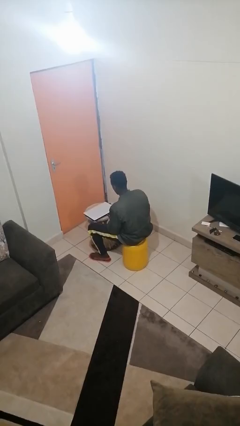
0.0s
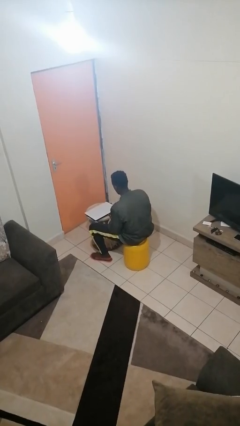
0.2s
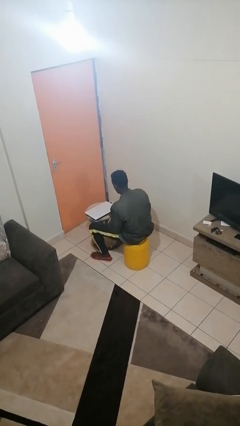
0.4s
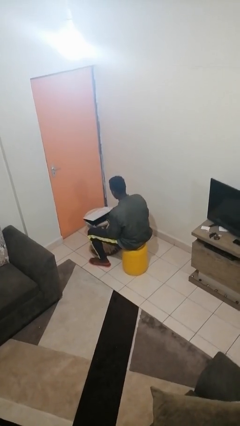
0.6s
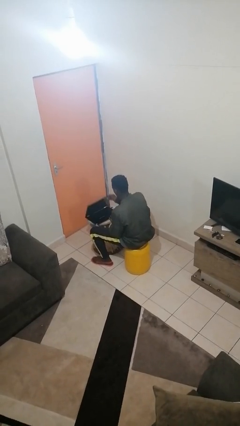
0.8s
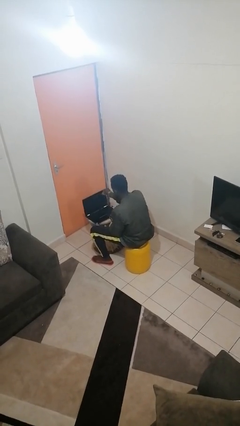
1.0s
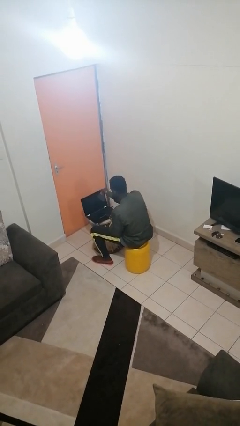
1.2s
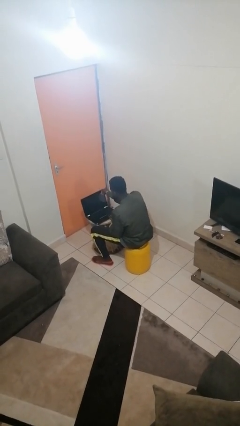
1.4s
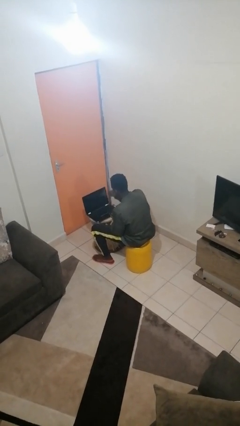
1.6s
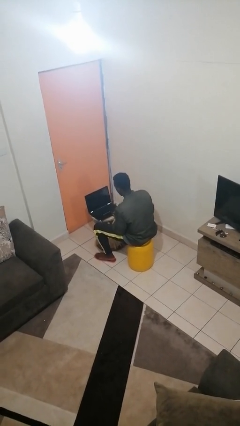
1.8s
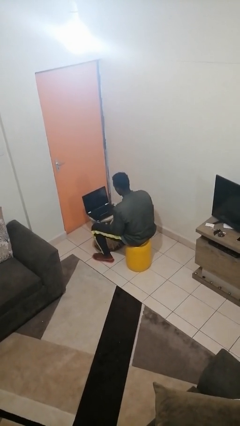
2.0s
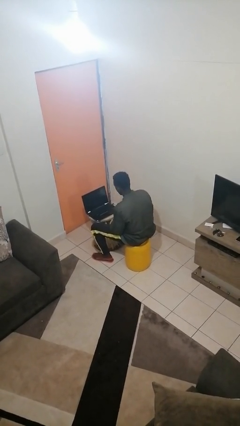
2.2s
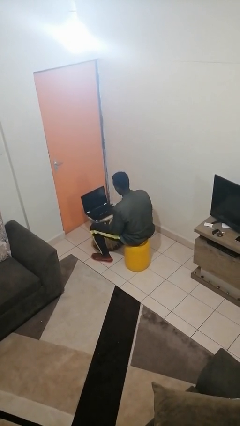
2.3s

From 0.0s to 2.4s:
person opens laptop

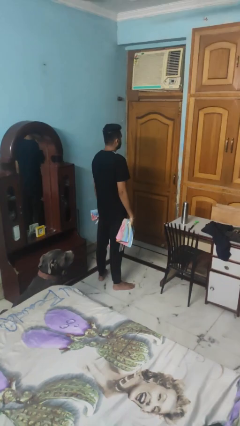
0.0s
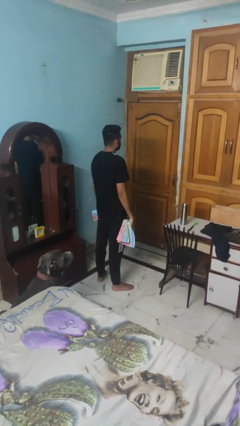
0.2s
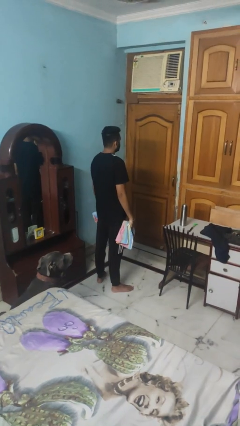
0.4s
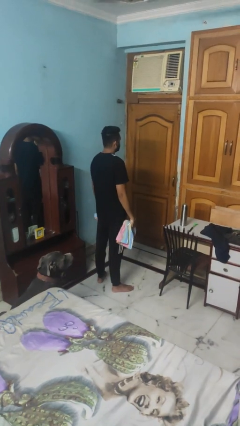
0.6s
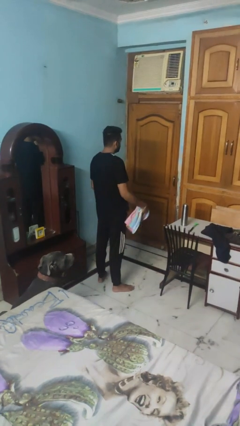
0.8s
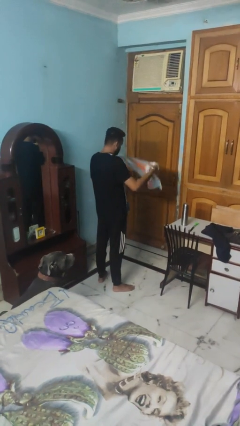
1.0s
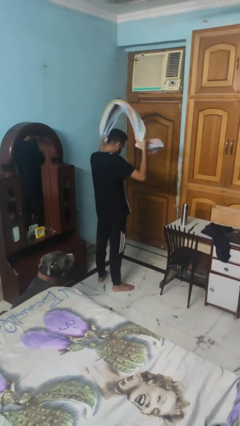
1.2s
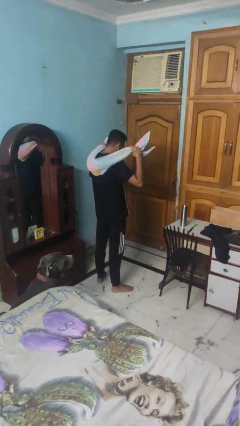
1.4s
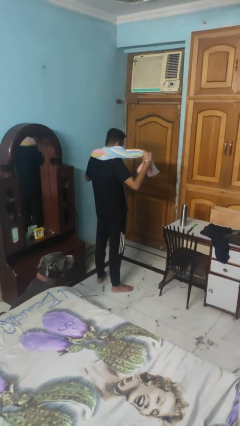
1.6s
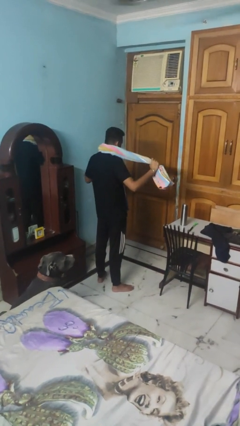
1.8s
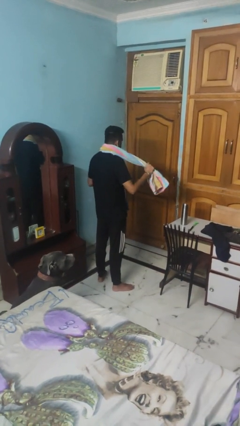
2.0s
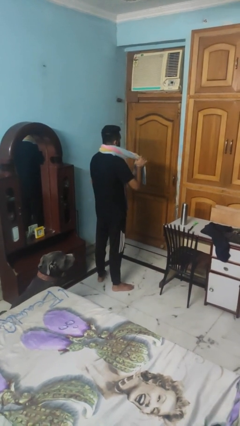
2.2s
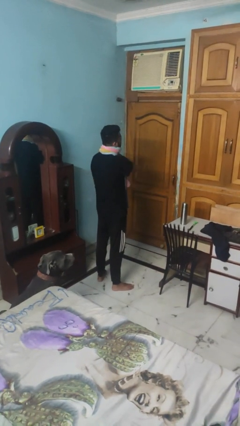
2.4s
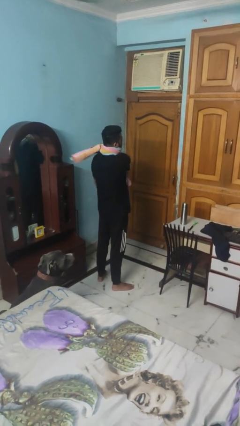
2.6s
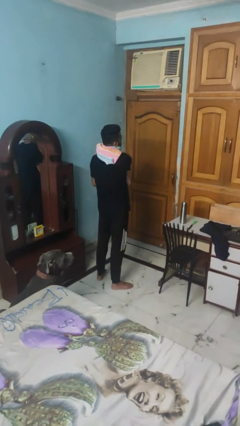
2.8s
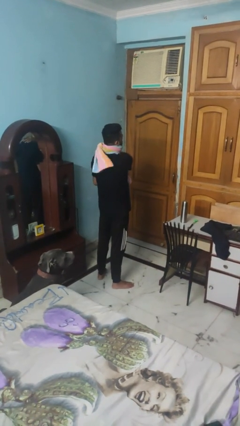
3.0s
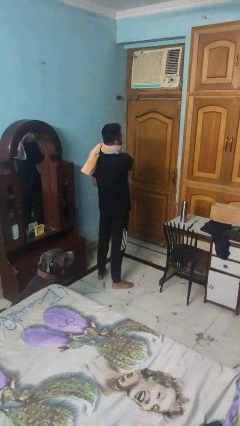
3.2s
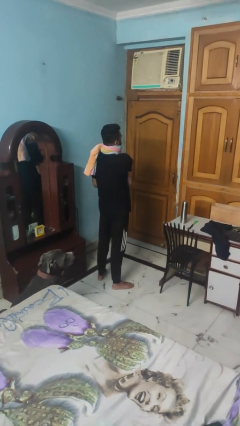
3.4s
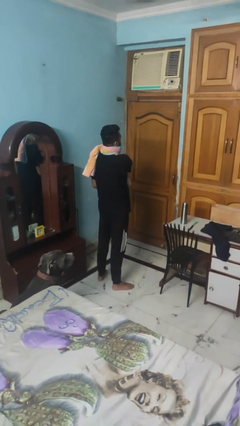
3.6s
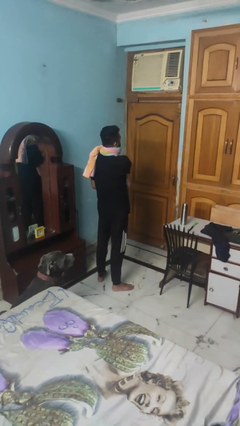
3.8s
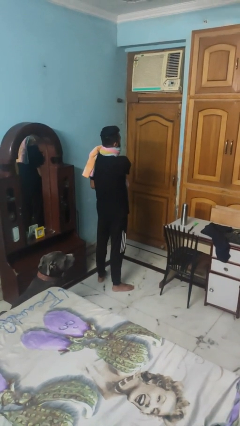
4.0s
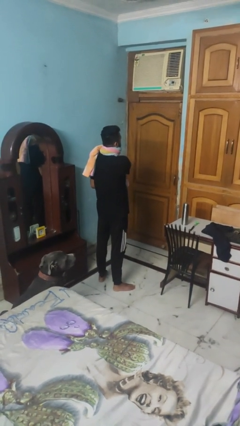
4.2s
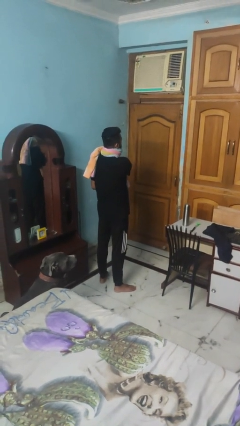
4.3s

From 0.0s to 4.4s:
person puts on scarf

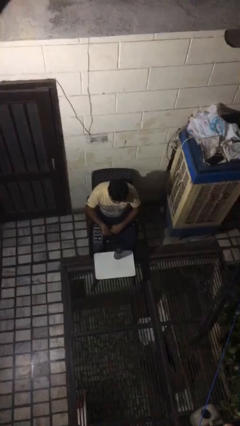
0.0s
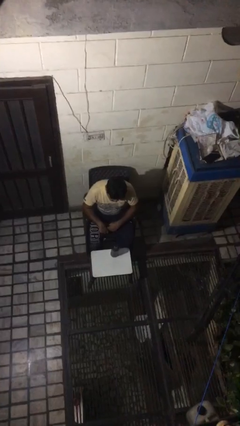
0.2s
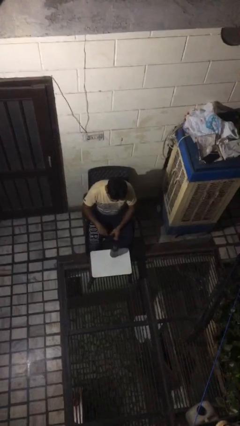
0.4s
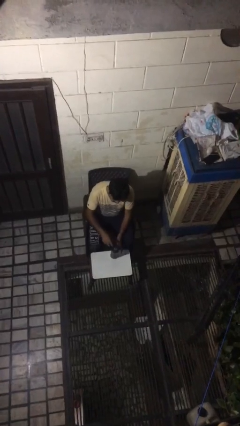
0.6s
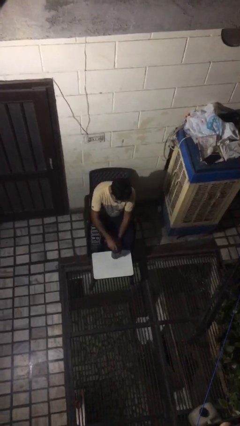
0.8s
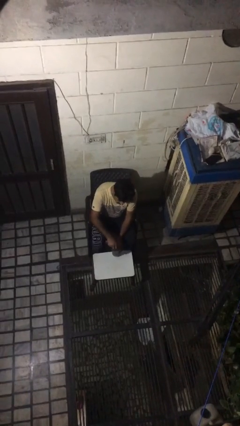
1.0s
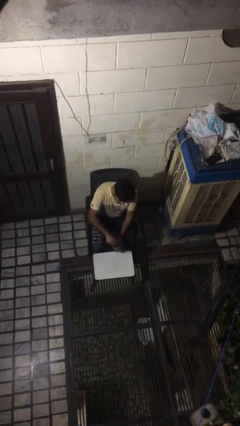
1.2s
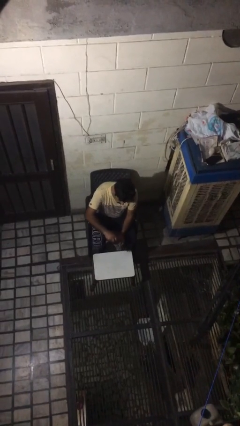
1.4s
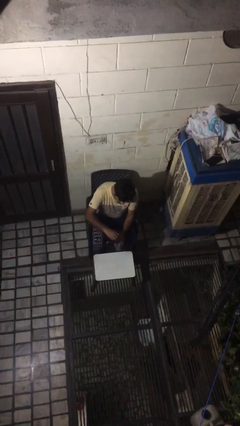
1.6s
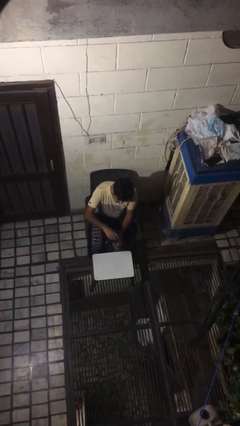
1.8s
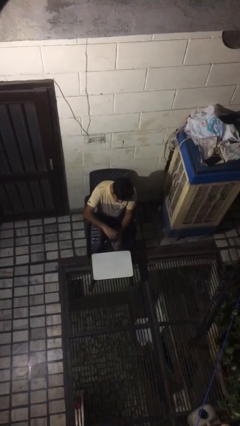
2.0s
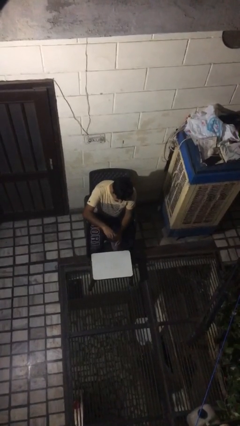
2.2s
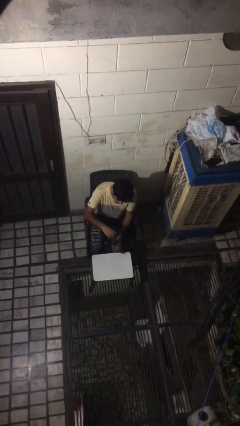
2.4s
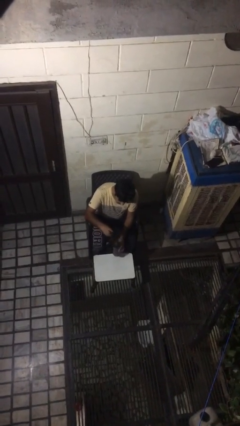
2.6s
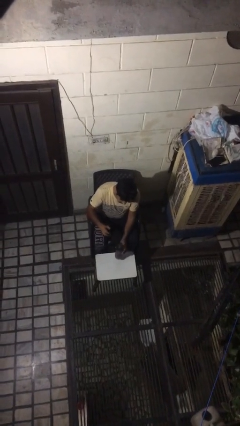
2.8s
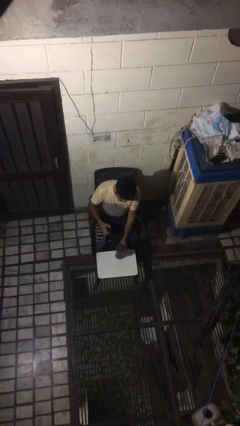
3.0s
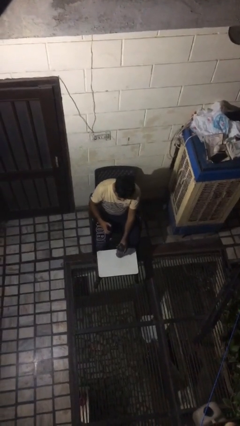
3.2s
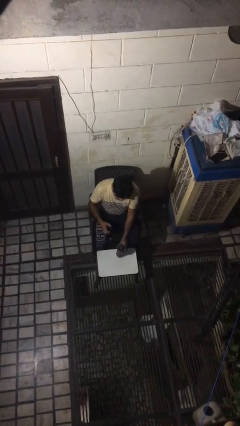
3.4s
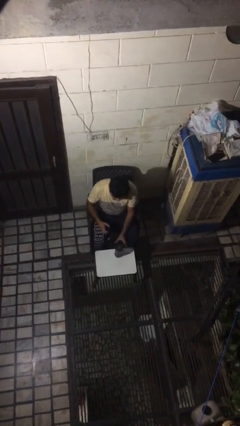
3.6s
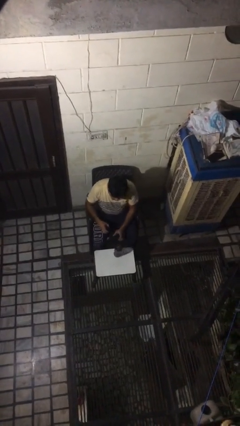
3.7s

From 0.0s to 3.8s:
person unscrews lid from bottle

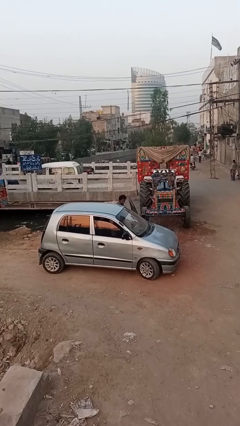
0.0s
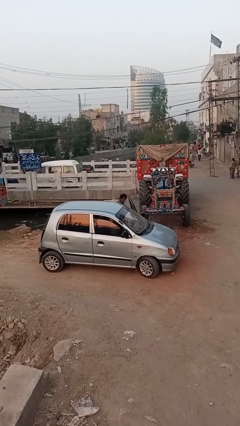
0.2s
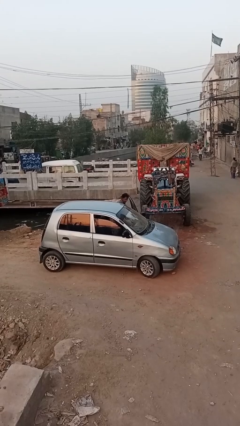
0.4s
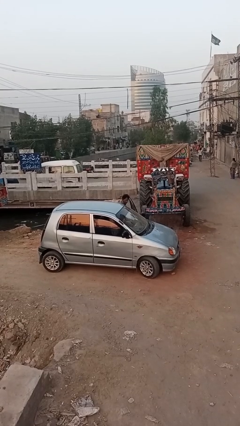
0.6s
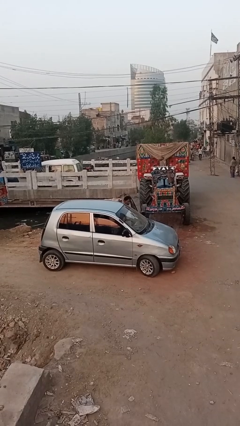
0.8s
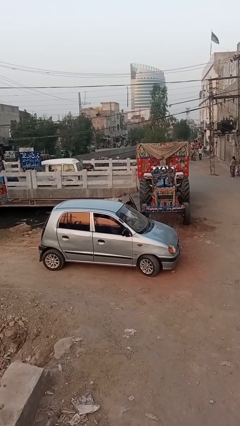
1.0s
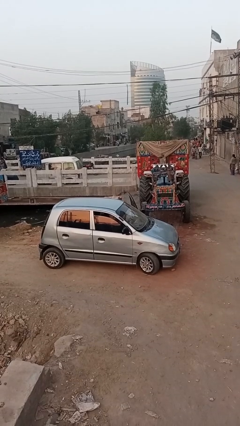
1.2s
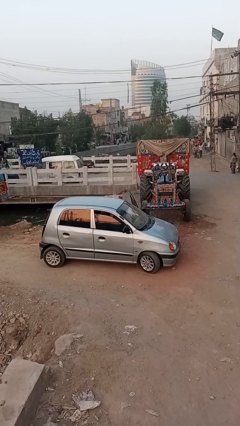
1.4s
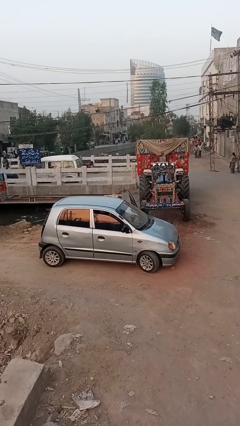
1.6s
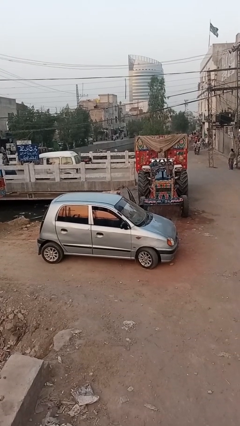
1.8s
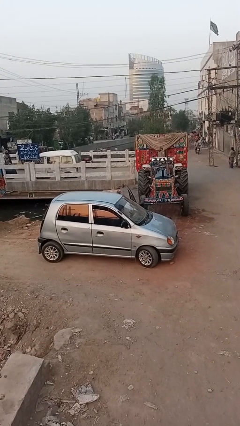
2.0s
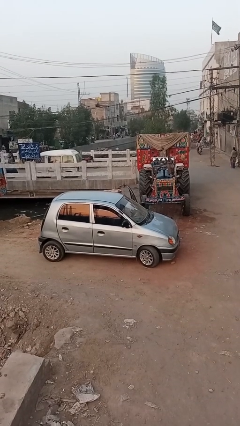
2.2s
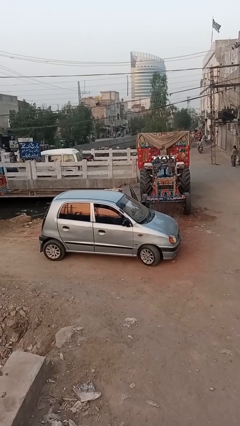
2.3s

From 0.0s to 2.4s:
person enters car

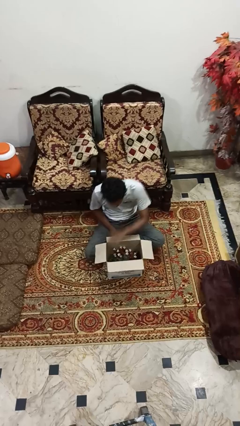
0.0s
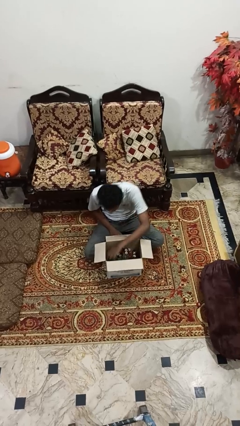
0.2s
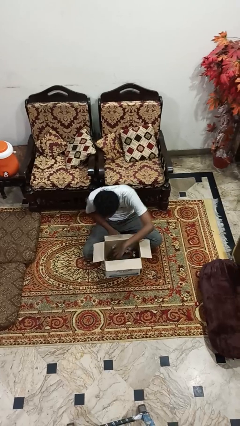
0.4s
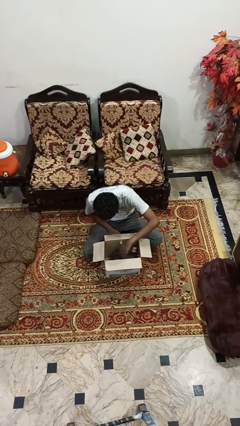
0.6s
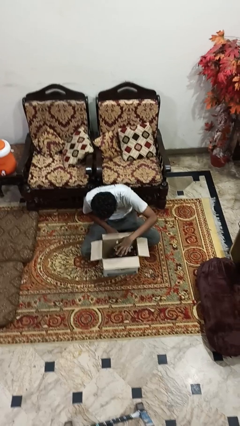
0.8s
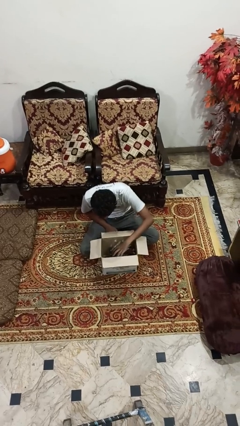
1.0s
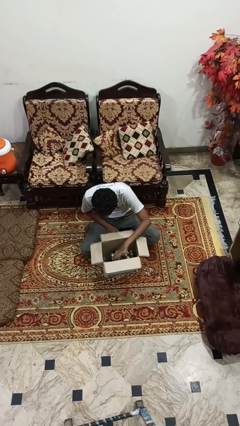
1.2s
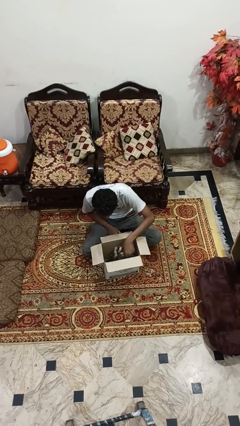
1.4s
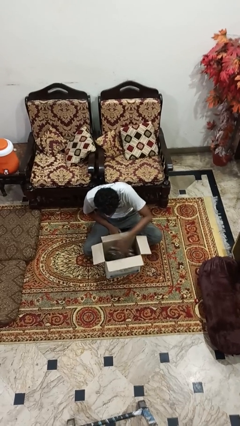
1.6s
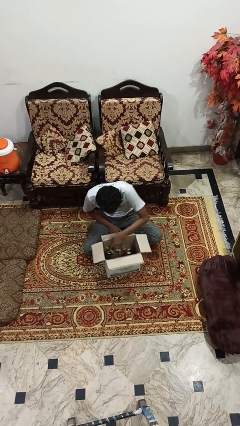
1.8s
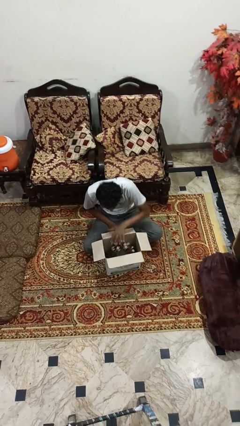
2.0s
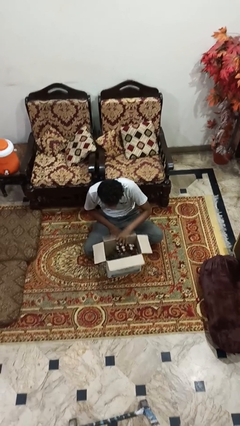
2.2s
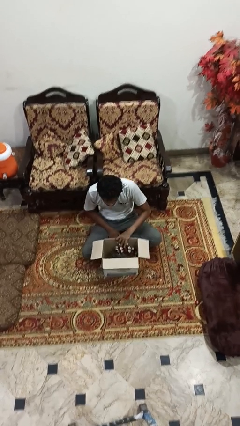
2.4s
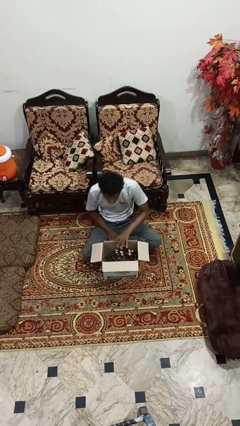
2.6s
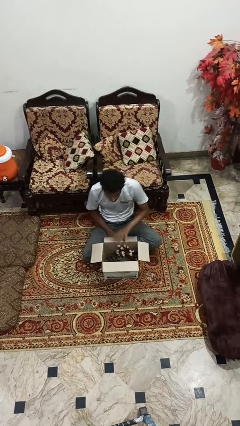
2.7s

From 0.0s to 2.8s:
person searches in box

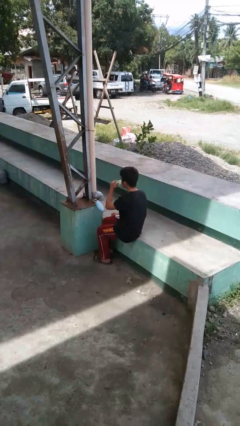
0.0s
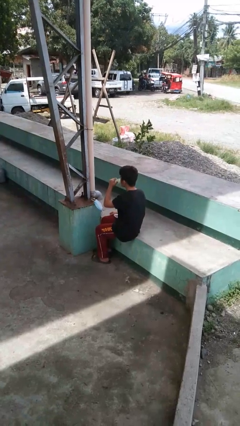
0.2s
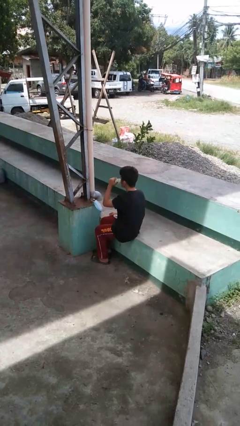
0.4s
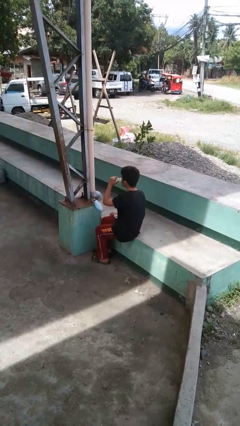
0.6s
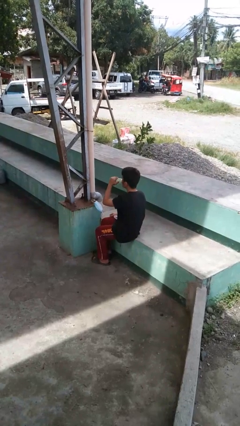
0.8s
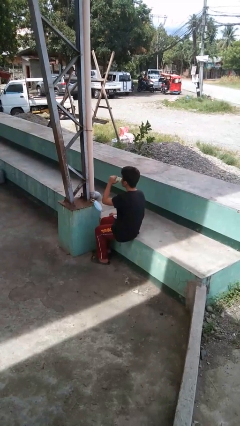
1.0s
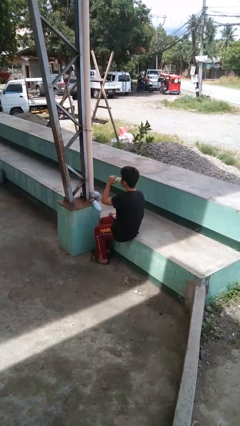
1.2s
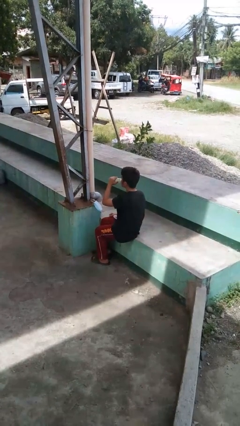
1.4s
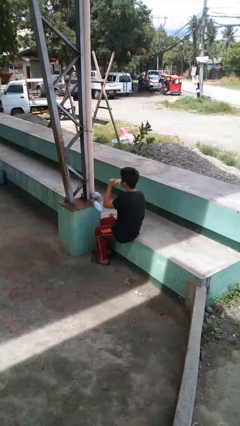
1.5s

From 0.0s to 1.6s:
person drinks from bottle

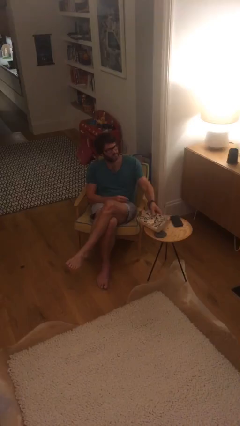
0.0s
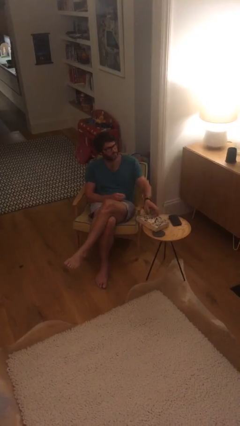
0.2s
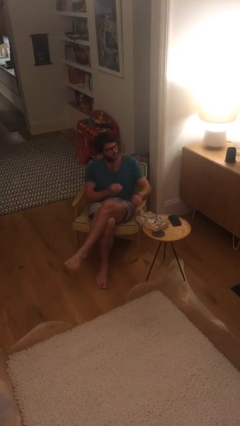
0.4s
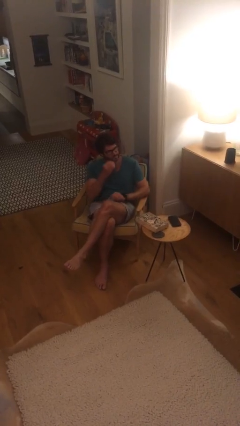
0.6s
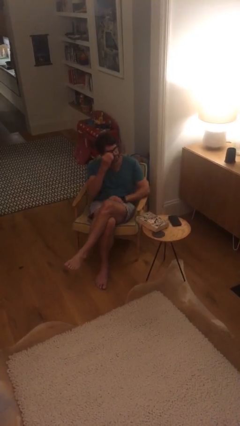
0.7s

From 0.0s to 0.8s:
person stands up
